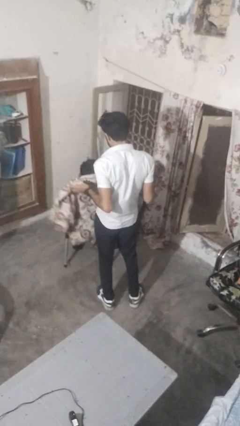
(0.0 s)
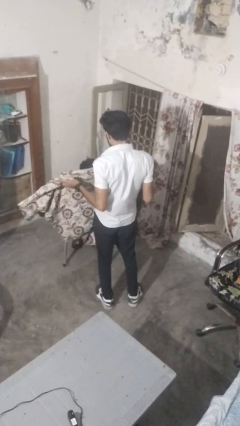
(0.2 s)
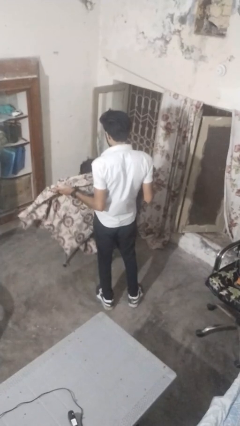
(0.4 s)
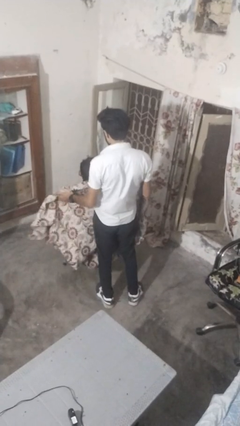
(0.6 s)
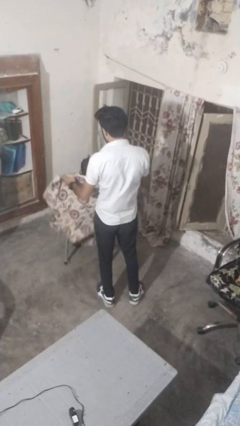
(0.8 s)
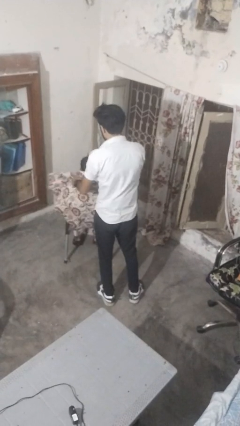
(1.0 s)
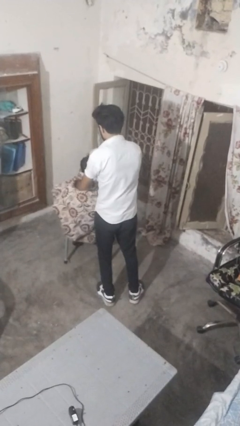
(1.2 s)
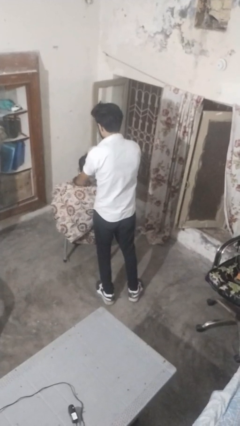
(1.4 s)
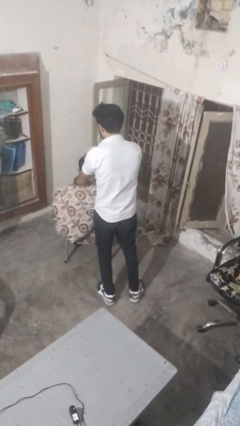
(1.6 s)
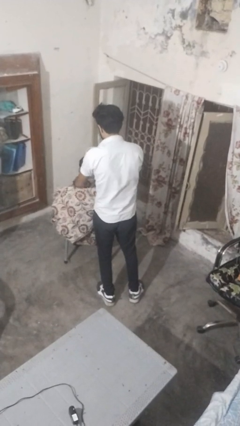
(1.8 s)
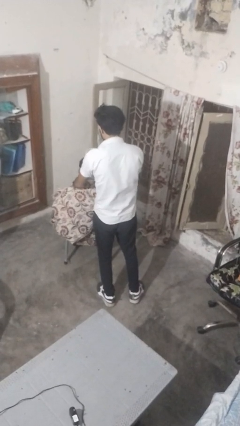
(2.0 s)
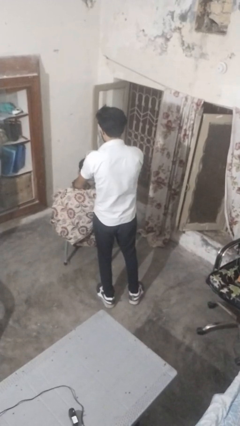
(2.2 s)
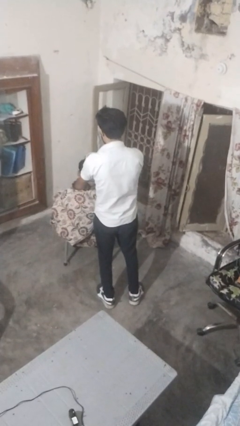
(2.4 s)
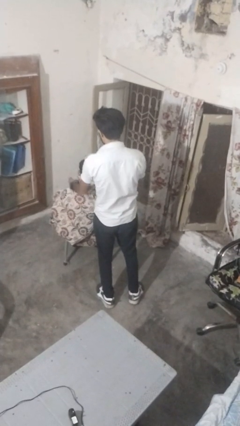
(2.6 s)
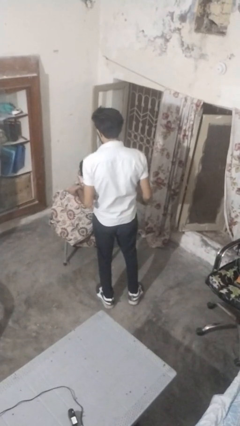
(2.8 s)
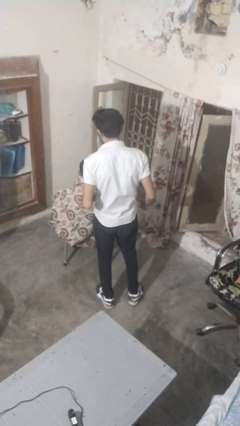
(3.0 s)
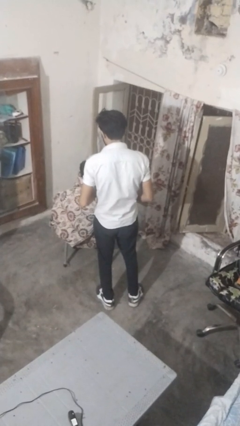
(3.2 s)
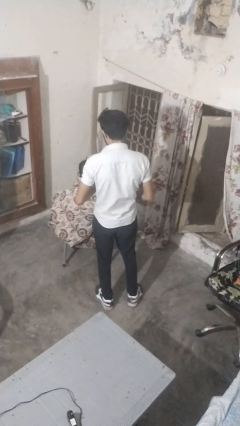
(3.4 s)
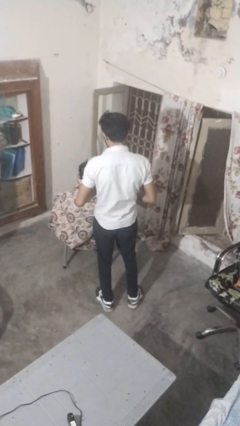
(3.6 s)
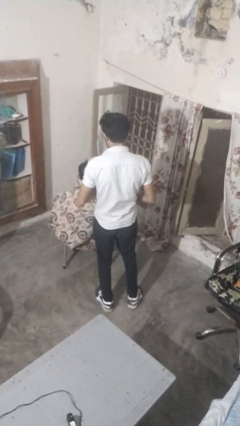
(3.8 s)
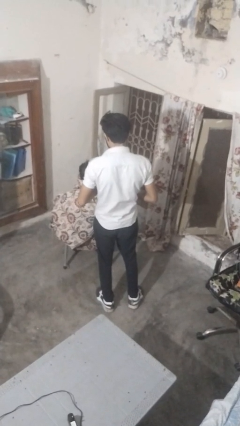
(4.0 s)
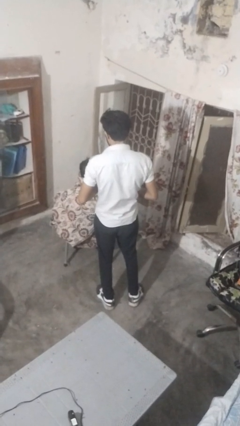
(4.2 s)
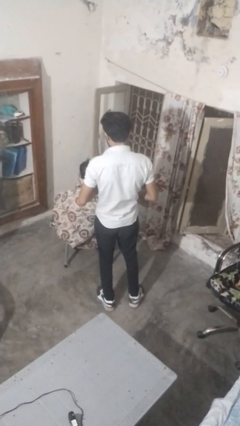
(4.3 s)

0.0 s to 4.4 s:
person covers friend with blanket

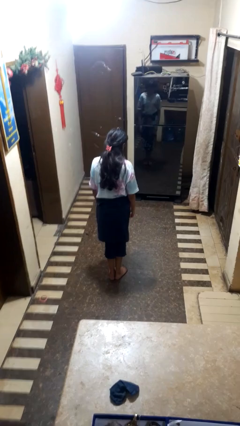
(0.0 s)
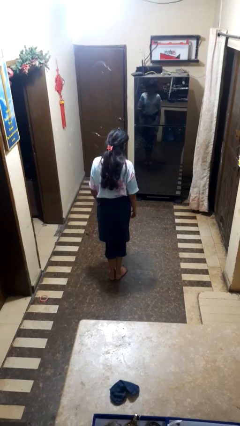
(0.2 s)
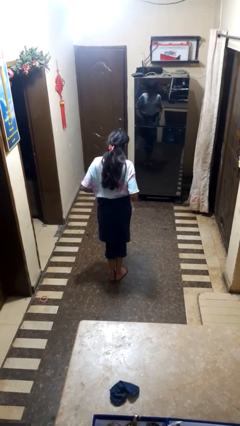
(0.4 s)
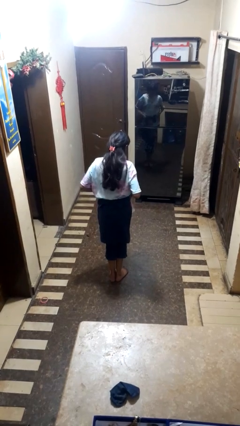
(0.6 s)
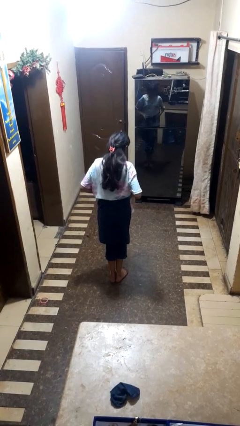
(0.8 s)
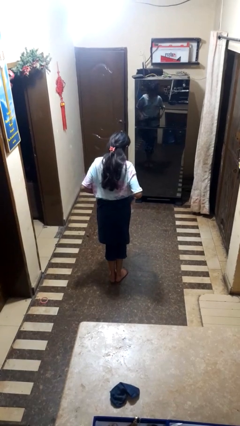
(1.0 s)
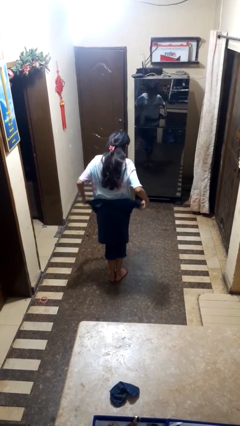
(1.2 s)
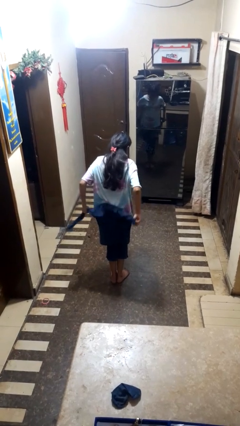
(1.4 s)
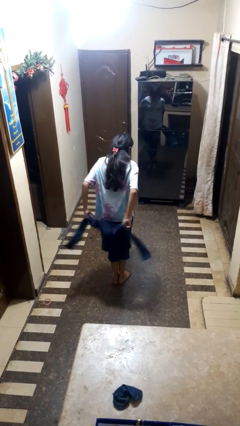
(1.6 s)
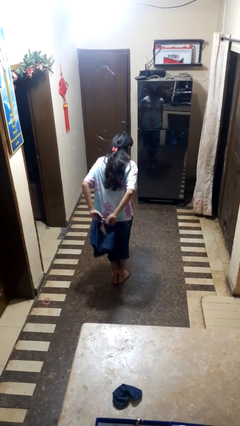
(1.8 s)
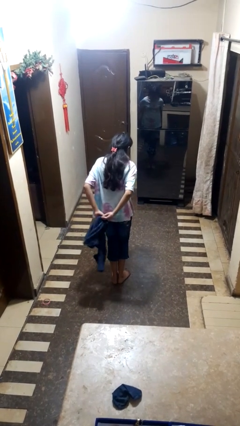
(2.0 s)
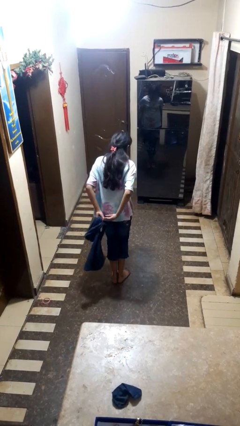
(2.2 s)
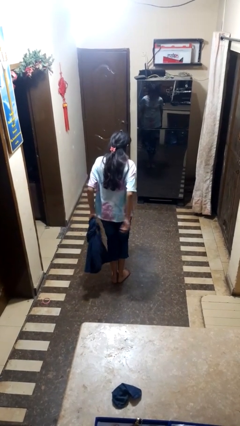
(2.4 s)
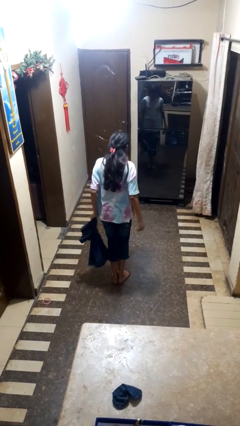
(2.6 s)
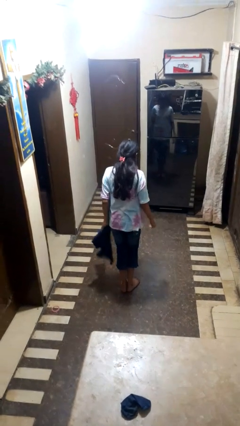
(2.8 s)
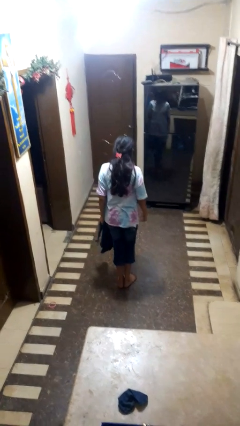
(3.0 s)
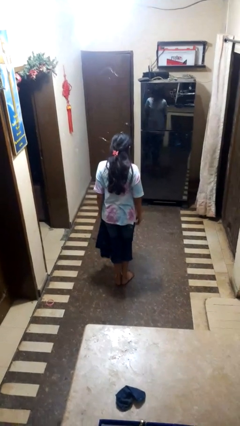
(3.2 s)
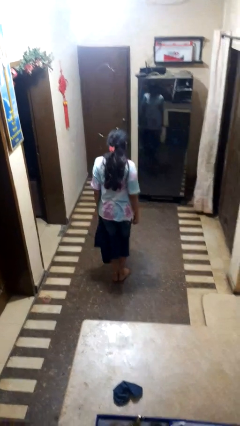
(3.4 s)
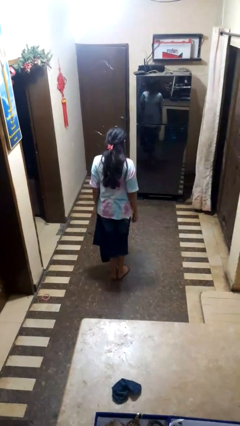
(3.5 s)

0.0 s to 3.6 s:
person unties jacket around waist

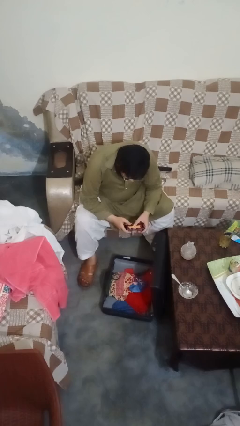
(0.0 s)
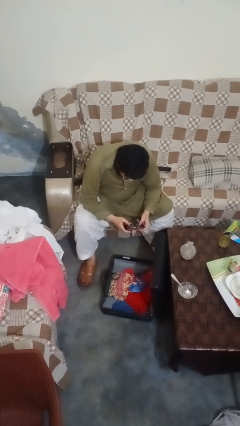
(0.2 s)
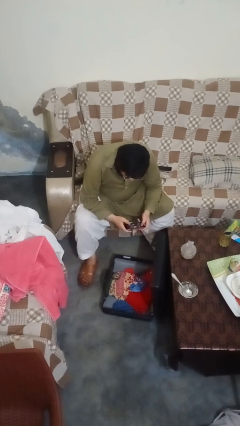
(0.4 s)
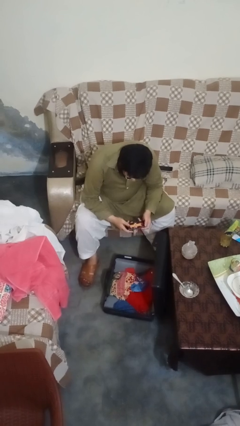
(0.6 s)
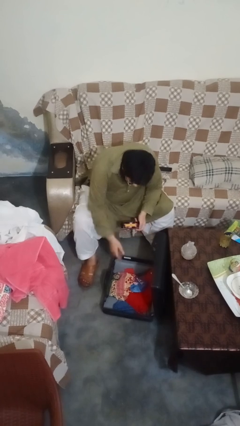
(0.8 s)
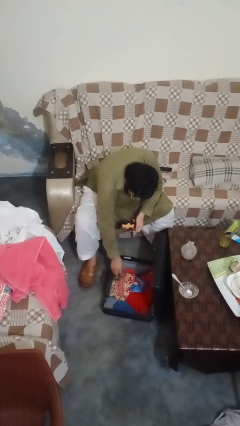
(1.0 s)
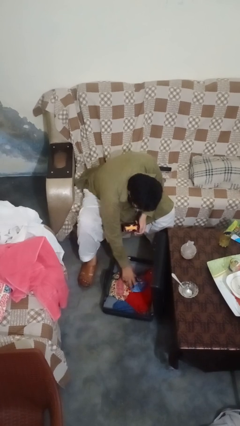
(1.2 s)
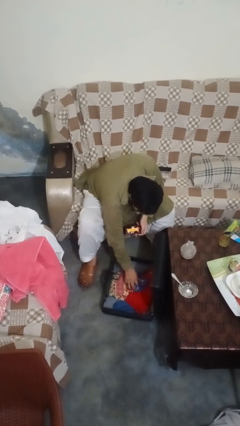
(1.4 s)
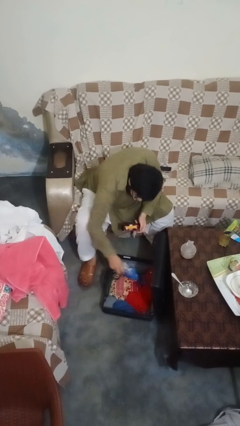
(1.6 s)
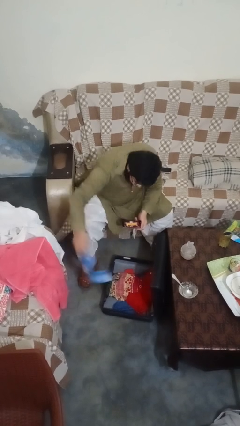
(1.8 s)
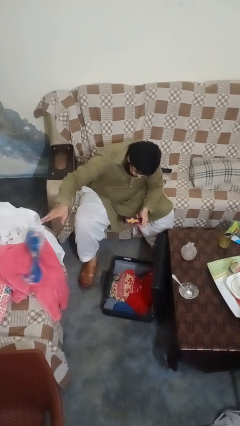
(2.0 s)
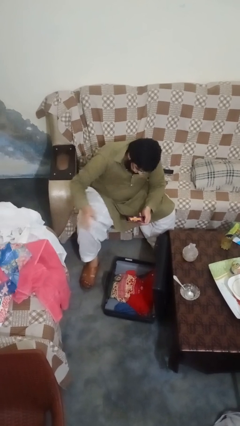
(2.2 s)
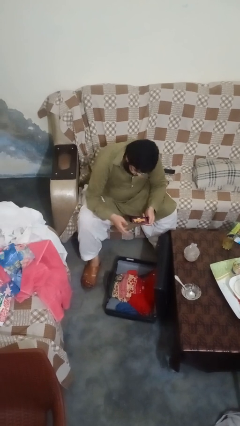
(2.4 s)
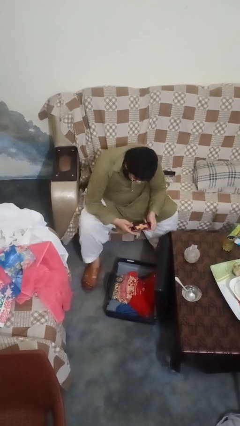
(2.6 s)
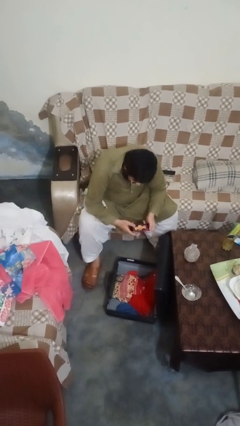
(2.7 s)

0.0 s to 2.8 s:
person unloads clothes from suitcase

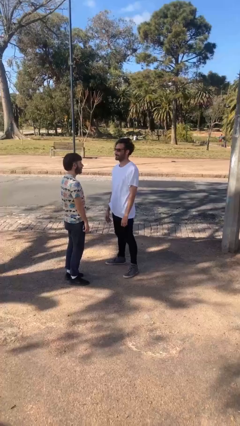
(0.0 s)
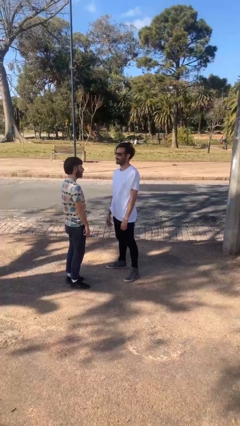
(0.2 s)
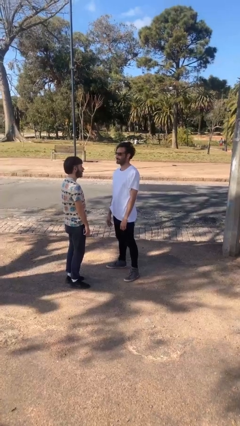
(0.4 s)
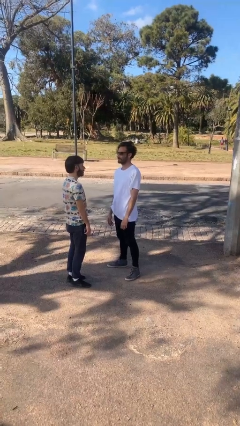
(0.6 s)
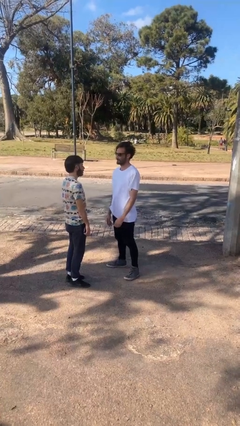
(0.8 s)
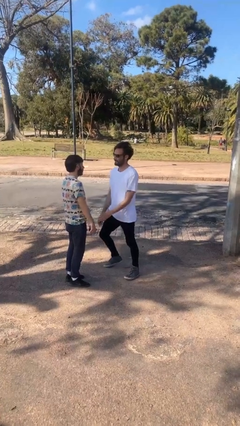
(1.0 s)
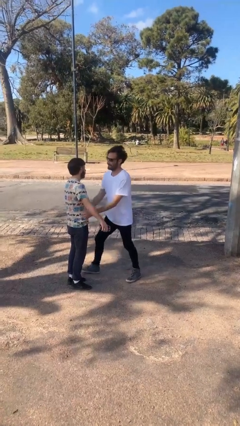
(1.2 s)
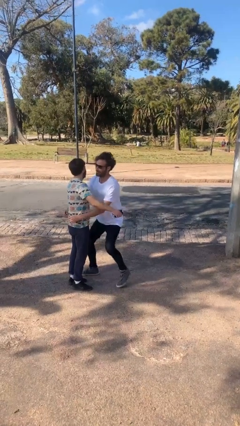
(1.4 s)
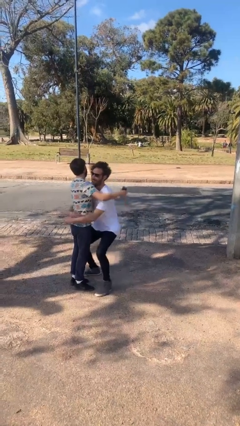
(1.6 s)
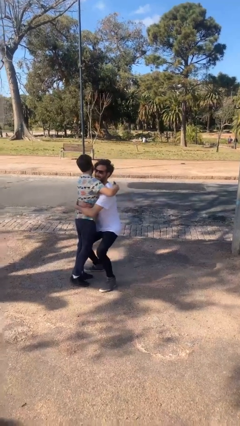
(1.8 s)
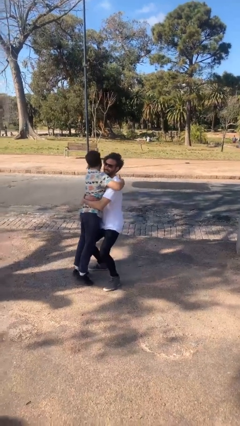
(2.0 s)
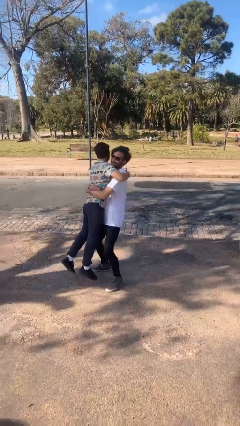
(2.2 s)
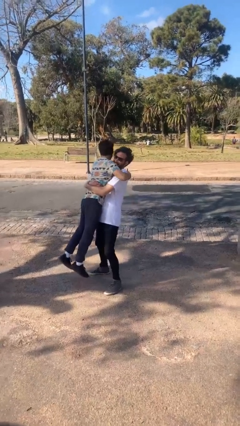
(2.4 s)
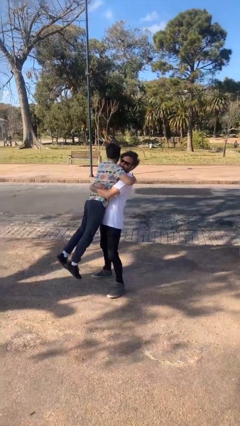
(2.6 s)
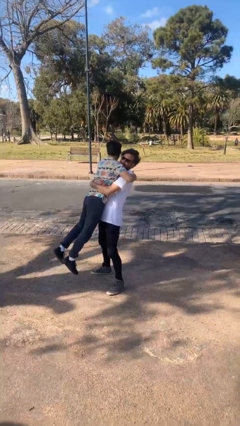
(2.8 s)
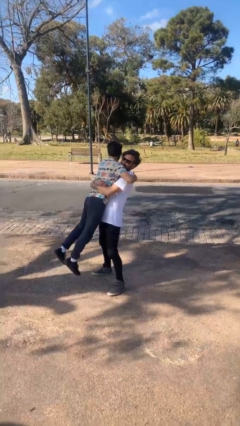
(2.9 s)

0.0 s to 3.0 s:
person picks up person

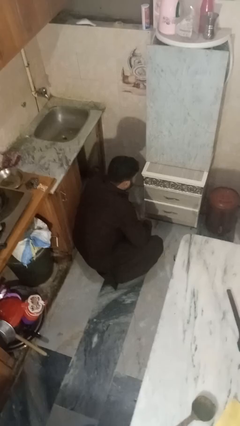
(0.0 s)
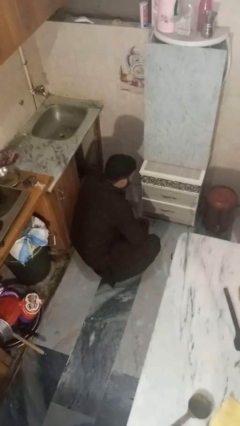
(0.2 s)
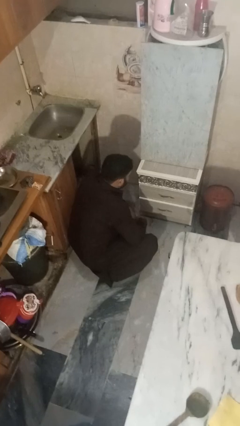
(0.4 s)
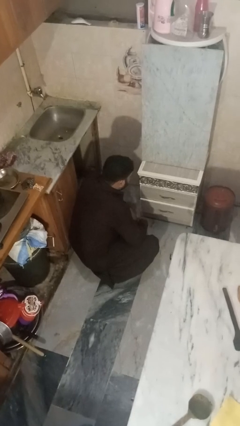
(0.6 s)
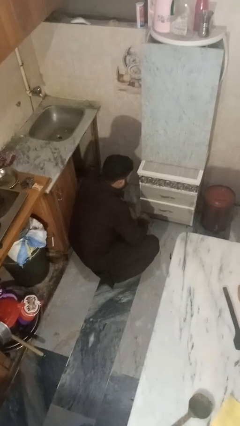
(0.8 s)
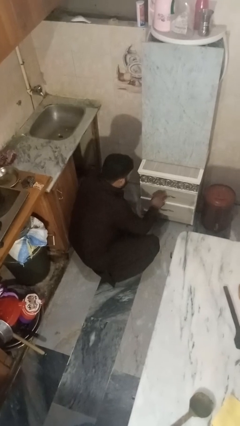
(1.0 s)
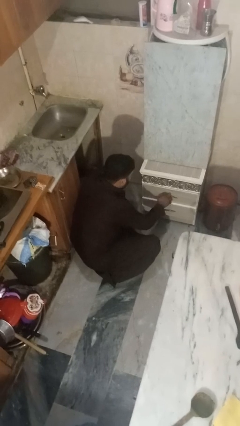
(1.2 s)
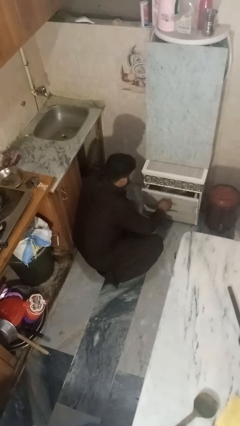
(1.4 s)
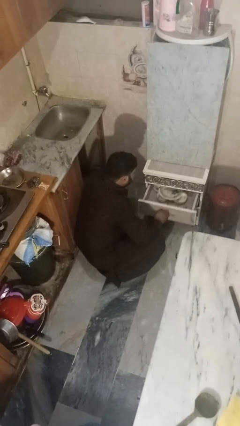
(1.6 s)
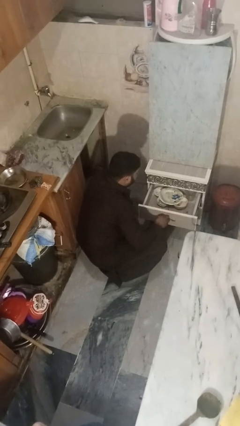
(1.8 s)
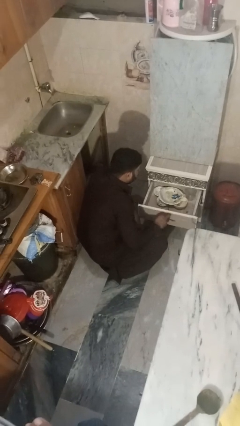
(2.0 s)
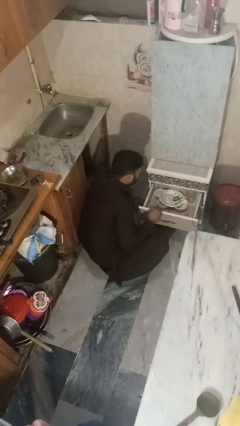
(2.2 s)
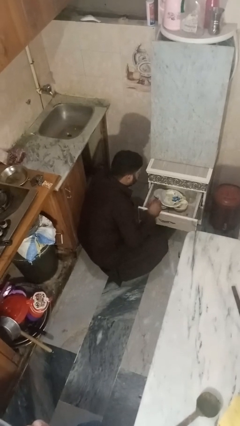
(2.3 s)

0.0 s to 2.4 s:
person searches in kitchen drawer

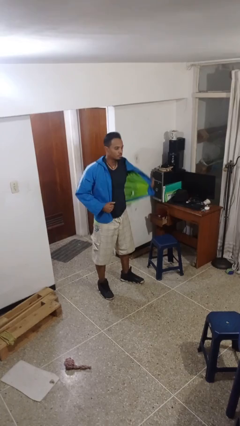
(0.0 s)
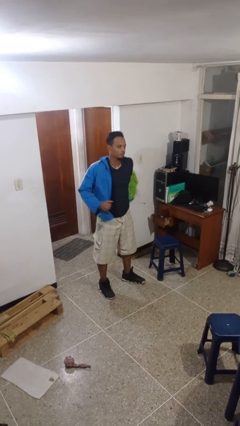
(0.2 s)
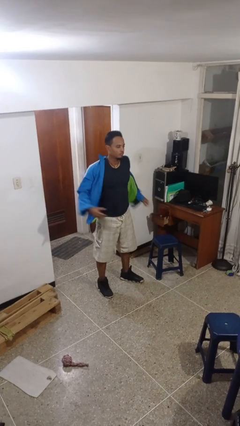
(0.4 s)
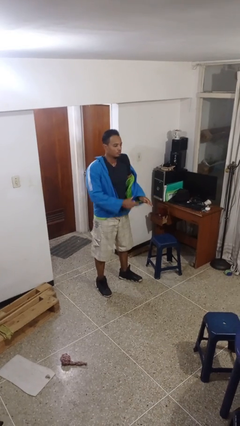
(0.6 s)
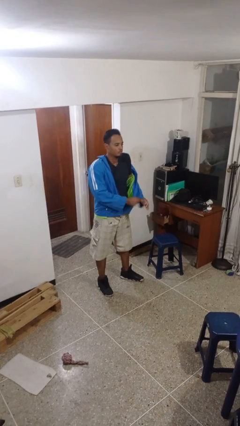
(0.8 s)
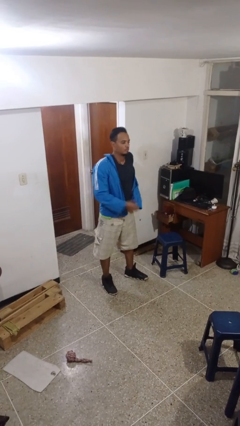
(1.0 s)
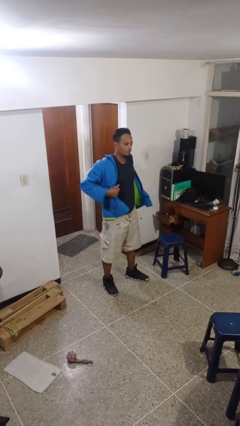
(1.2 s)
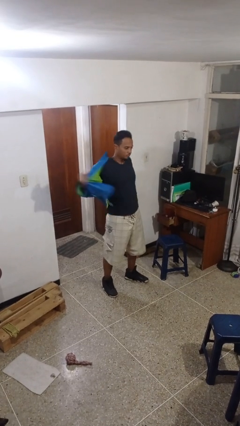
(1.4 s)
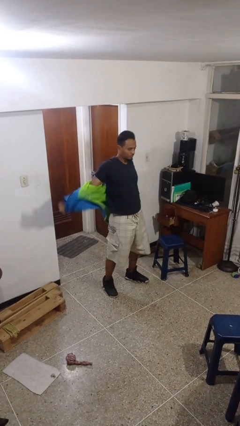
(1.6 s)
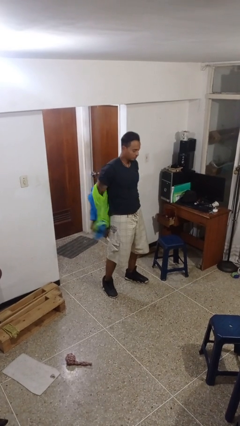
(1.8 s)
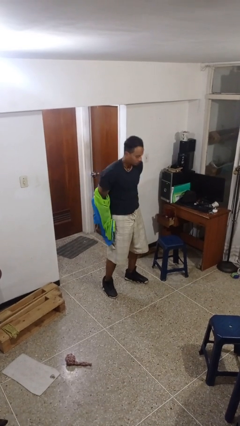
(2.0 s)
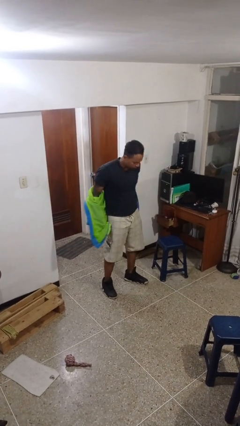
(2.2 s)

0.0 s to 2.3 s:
person takes off jacket
